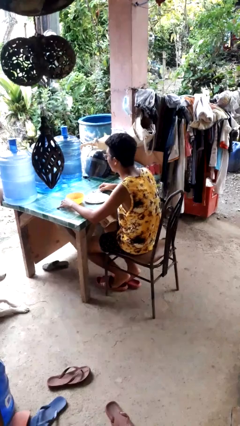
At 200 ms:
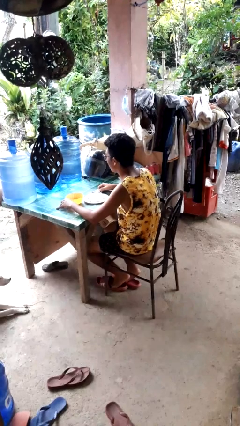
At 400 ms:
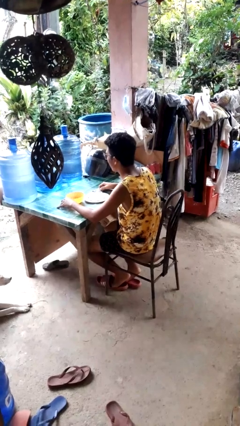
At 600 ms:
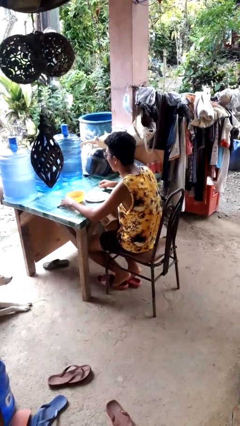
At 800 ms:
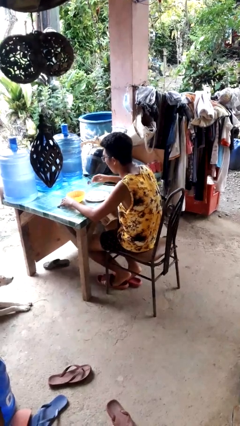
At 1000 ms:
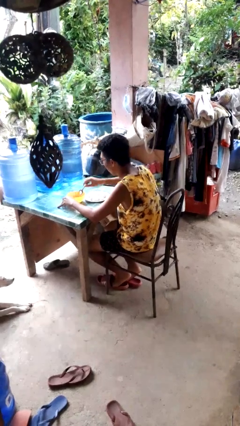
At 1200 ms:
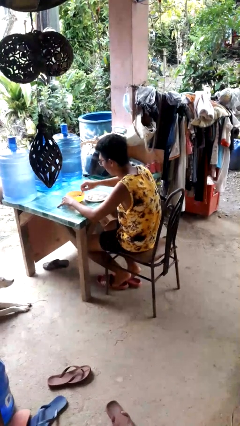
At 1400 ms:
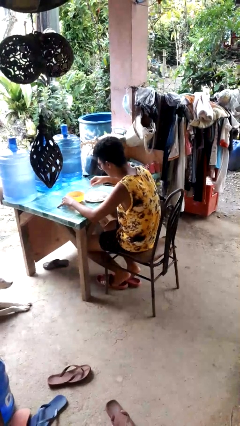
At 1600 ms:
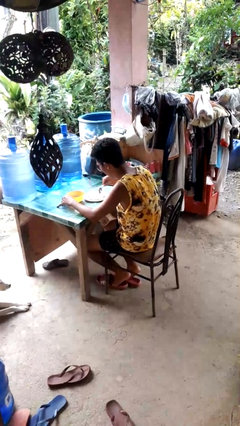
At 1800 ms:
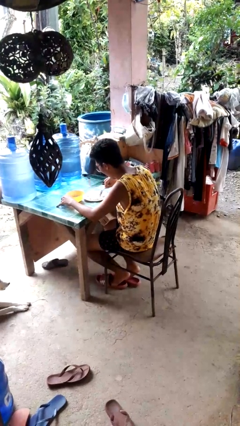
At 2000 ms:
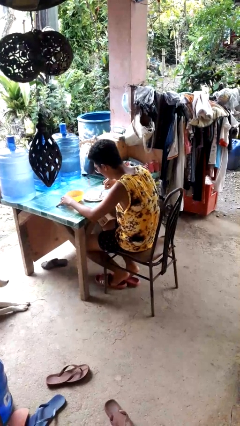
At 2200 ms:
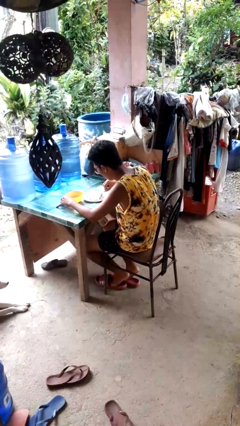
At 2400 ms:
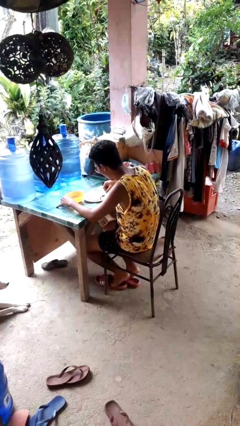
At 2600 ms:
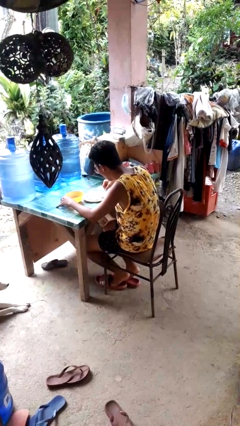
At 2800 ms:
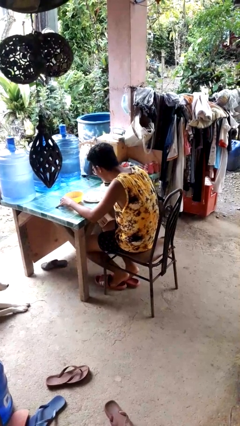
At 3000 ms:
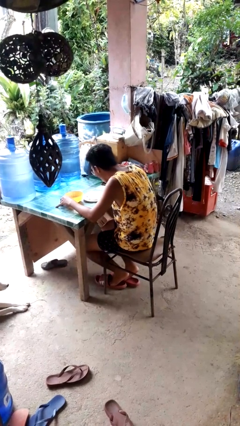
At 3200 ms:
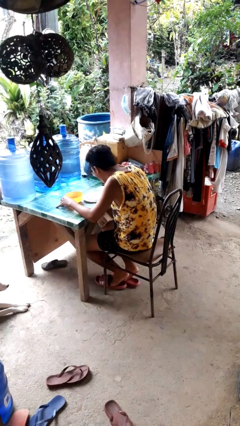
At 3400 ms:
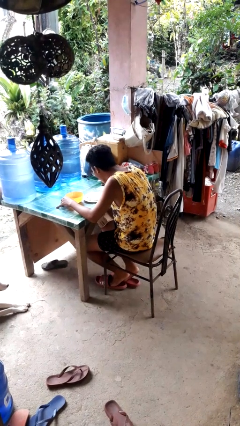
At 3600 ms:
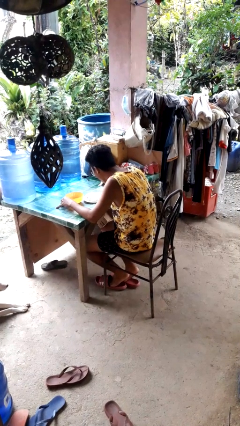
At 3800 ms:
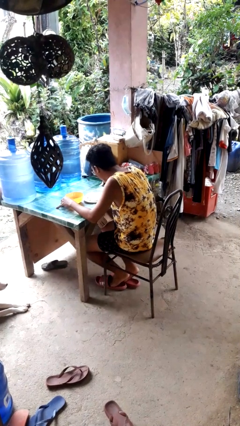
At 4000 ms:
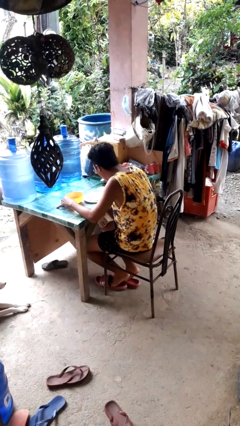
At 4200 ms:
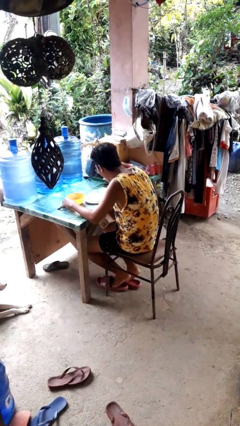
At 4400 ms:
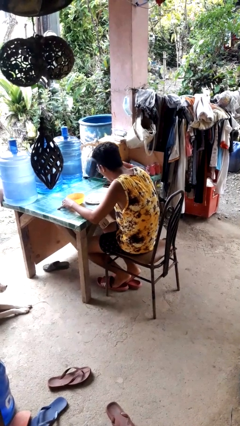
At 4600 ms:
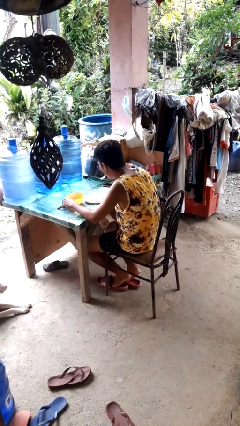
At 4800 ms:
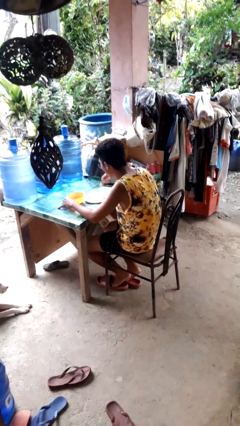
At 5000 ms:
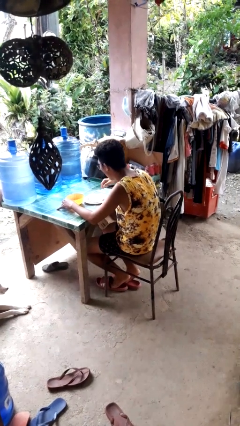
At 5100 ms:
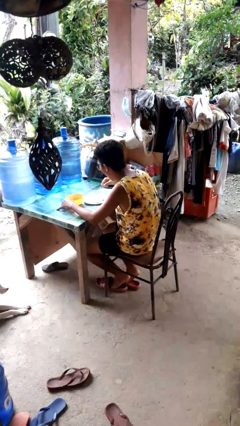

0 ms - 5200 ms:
person eats with utensil

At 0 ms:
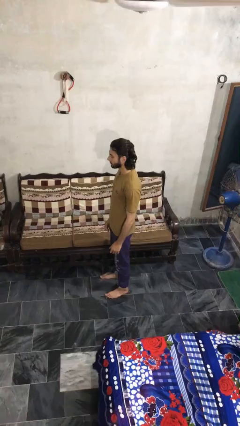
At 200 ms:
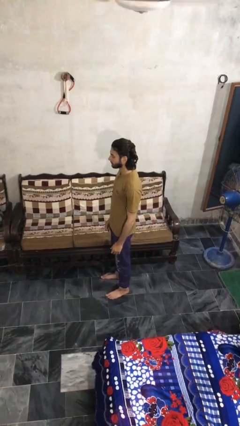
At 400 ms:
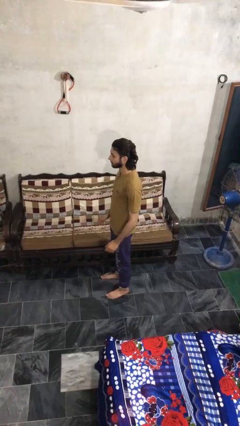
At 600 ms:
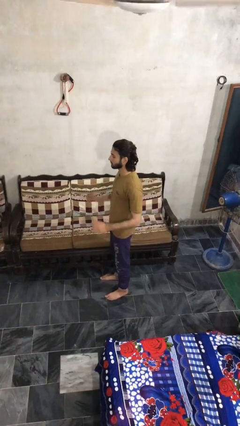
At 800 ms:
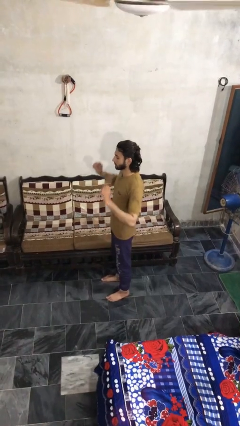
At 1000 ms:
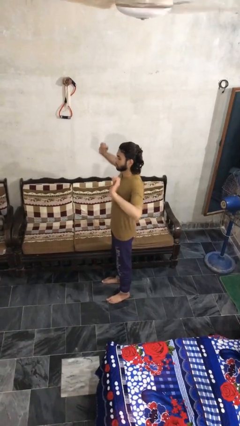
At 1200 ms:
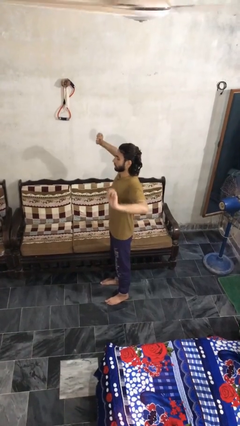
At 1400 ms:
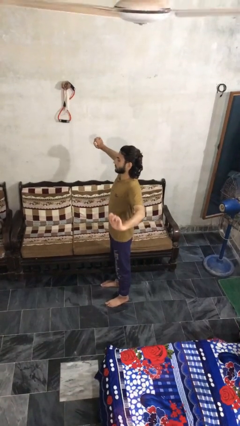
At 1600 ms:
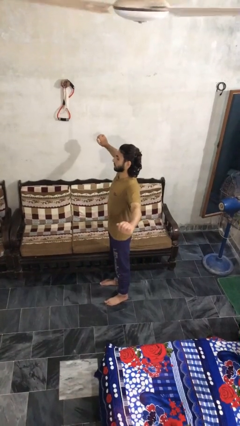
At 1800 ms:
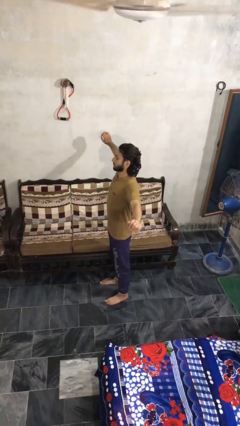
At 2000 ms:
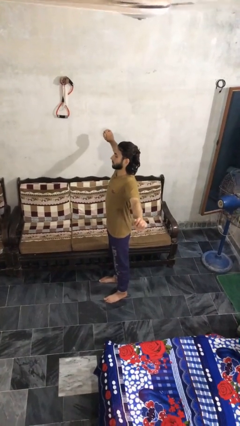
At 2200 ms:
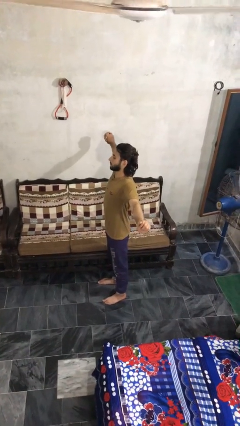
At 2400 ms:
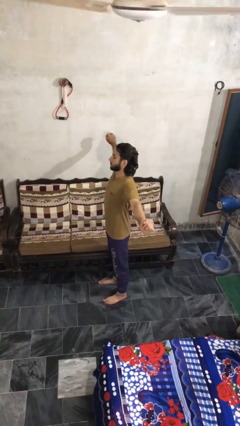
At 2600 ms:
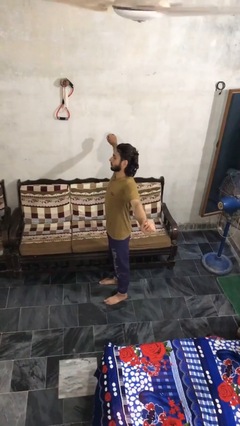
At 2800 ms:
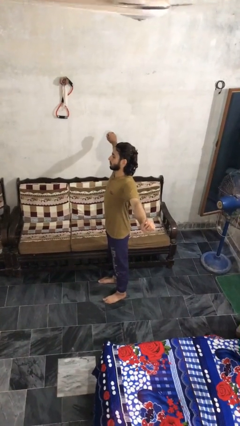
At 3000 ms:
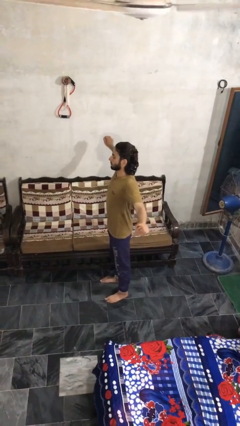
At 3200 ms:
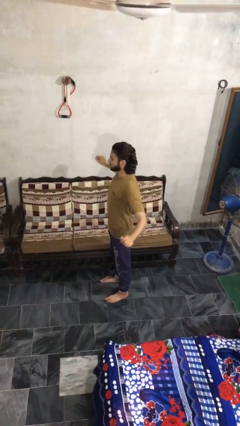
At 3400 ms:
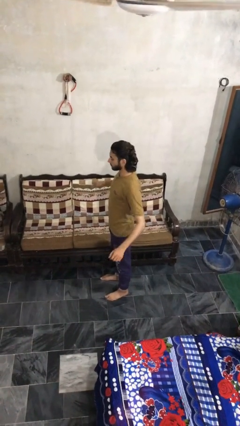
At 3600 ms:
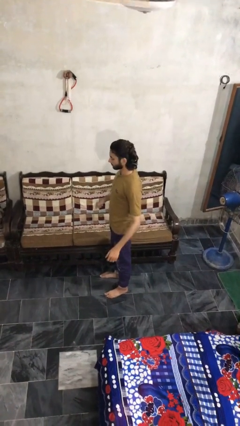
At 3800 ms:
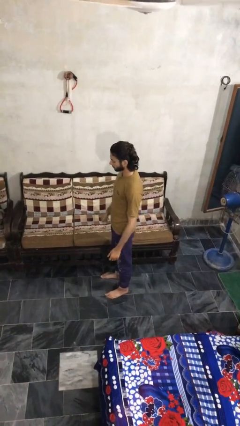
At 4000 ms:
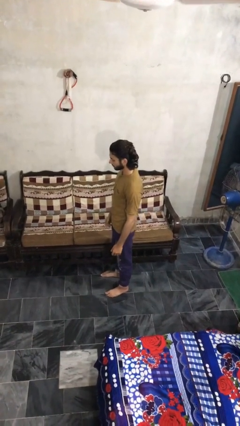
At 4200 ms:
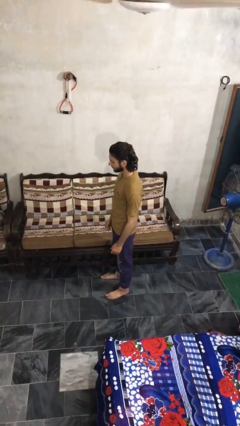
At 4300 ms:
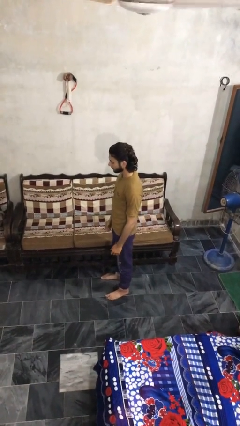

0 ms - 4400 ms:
person stretches arms to side

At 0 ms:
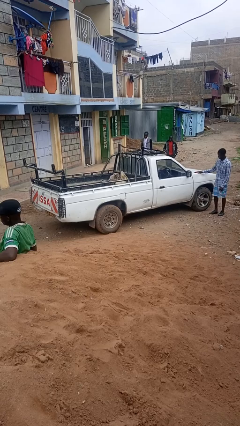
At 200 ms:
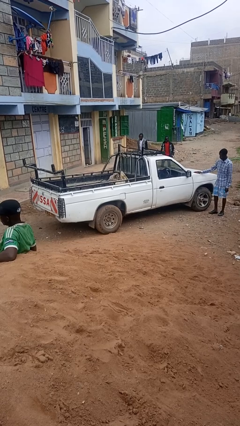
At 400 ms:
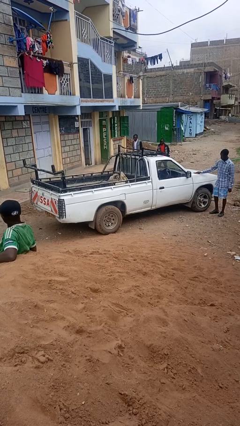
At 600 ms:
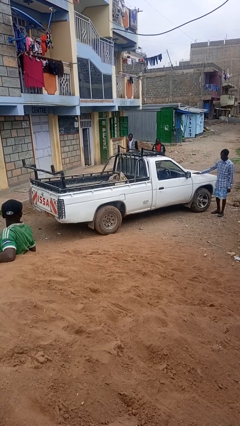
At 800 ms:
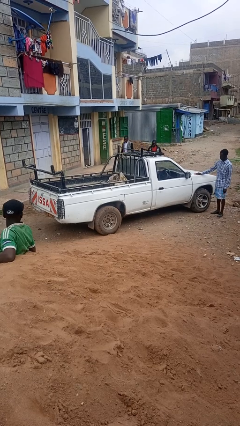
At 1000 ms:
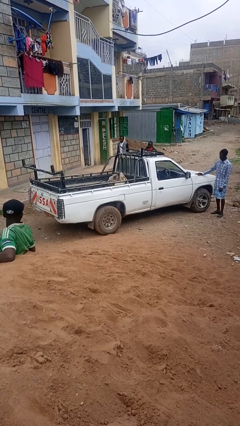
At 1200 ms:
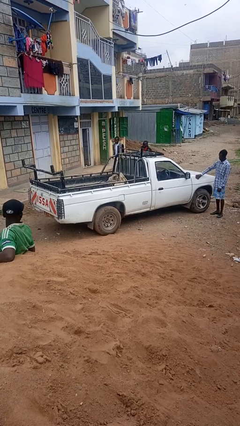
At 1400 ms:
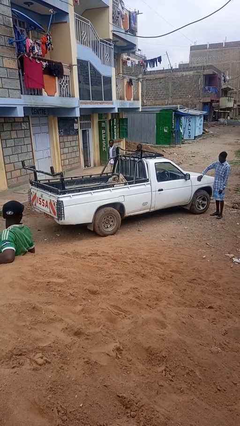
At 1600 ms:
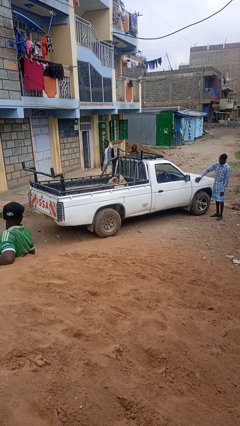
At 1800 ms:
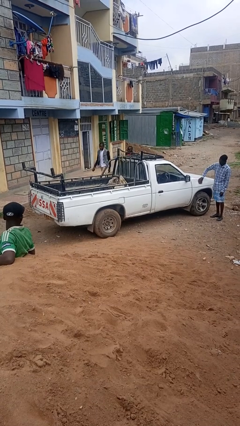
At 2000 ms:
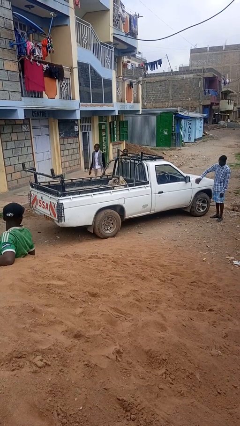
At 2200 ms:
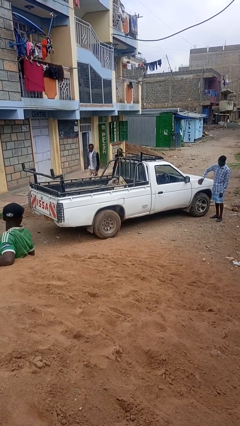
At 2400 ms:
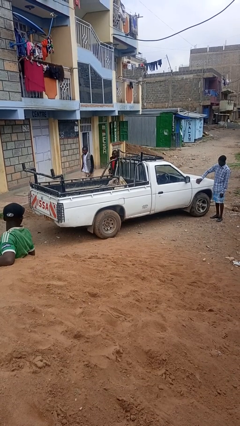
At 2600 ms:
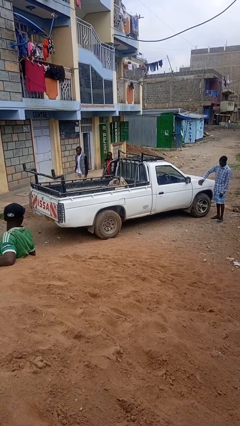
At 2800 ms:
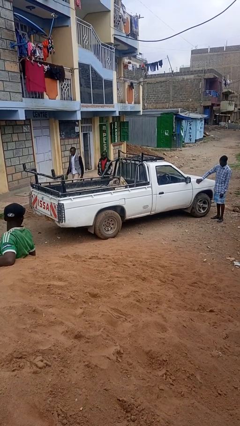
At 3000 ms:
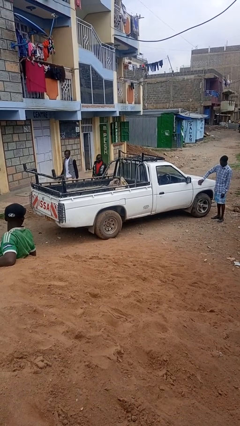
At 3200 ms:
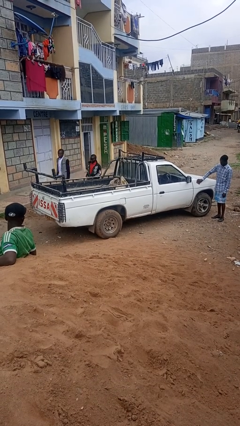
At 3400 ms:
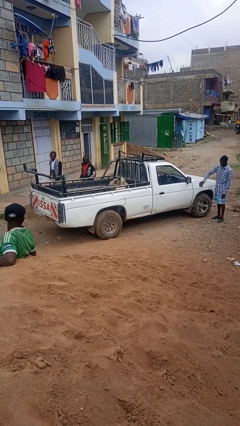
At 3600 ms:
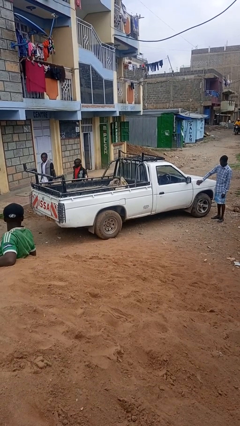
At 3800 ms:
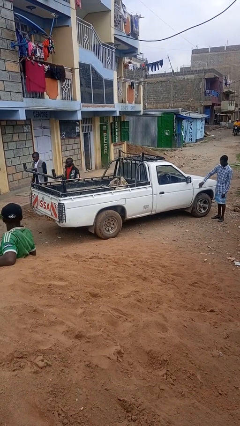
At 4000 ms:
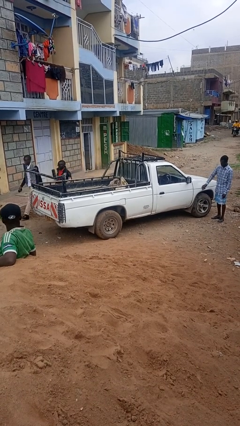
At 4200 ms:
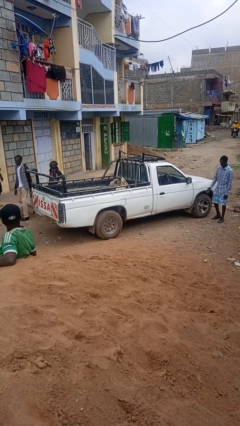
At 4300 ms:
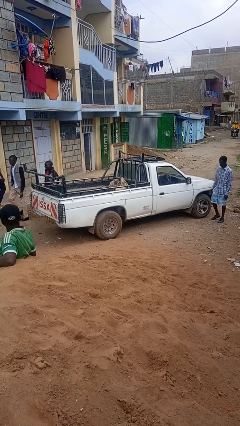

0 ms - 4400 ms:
person polishes car with rag

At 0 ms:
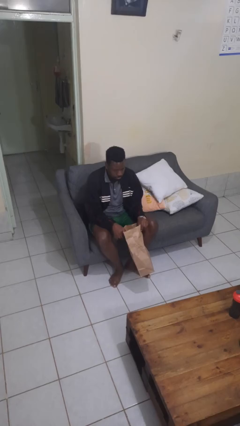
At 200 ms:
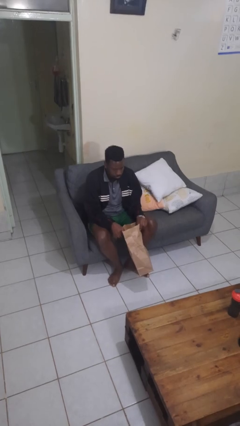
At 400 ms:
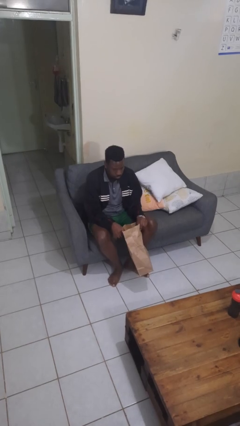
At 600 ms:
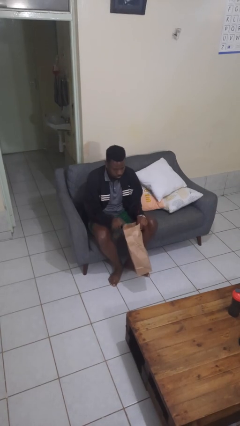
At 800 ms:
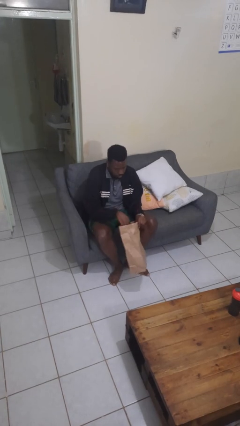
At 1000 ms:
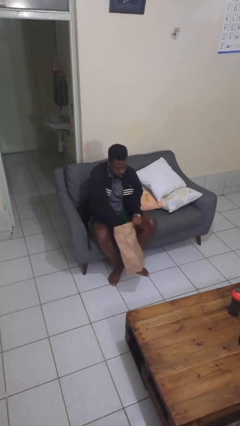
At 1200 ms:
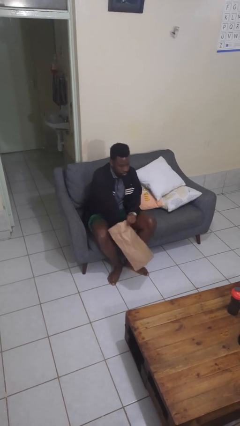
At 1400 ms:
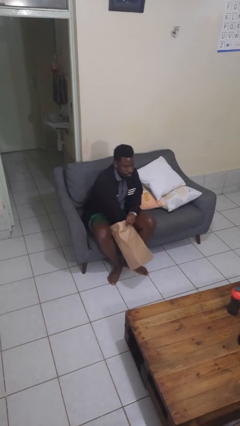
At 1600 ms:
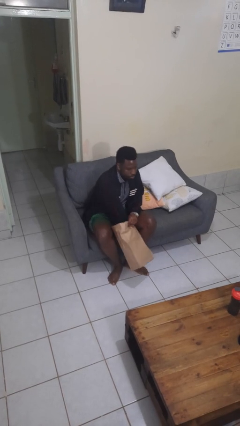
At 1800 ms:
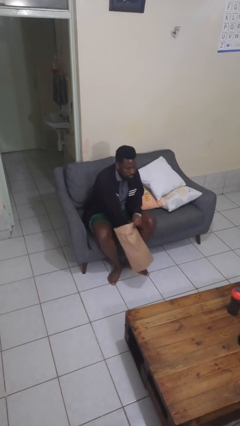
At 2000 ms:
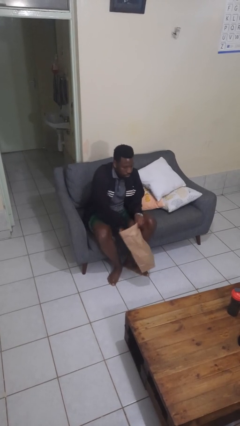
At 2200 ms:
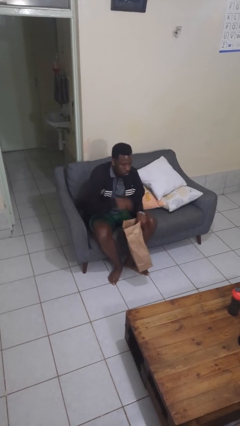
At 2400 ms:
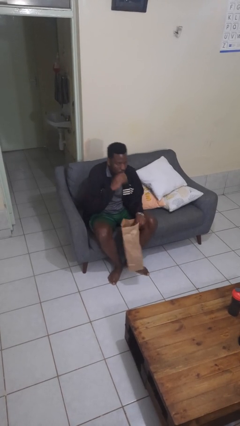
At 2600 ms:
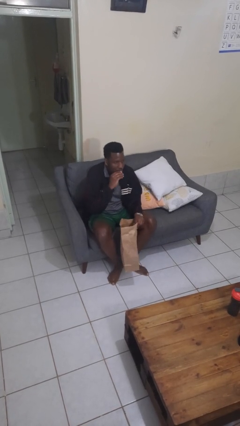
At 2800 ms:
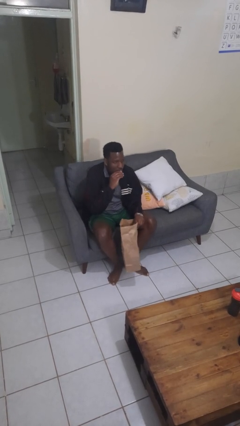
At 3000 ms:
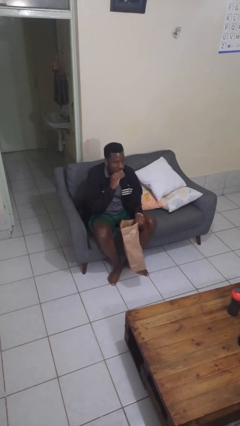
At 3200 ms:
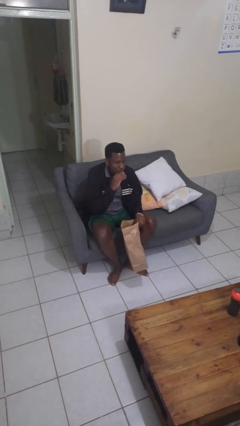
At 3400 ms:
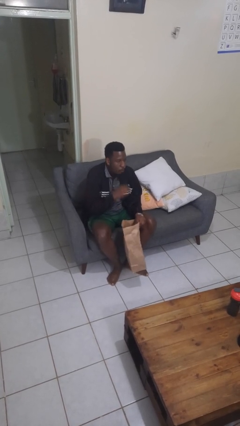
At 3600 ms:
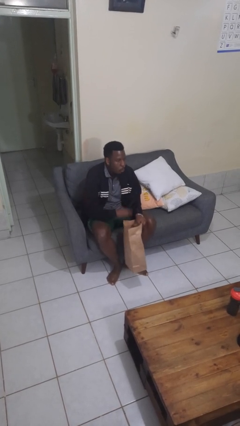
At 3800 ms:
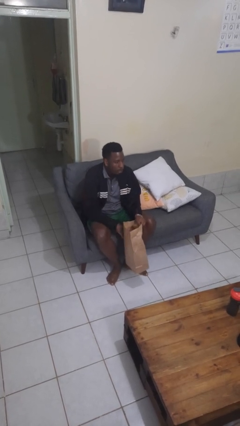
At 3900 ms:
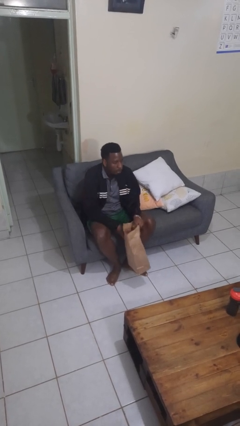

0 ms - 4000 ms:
person eats snack from bag
